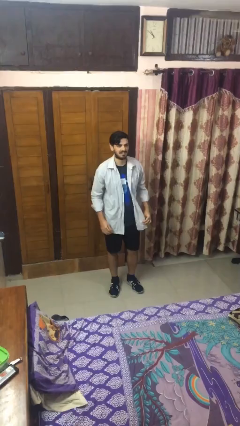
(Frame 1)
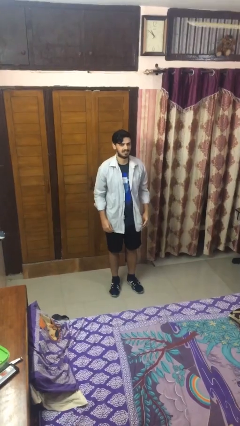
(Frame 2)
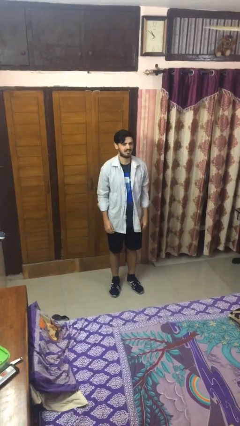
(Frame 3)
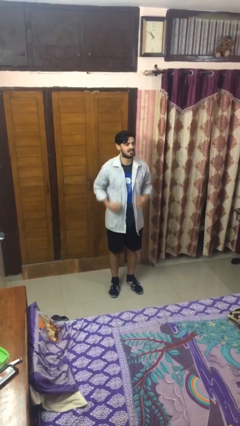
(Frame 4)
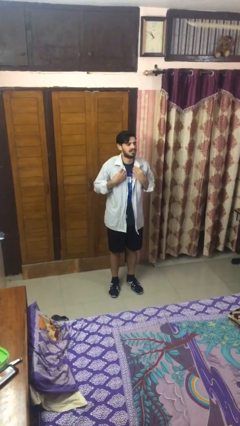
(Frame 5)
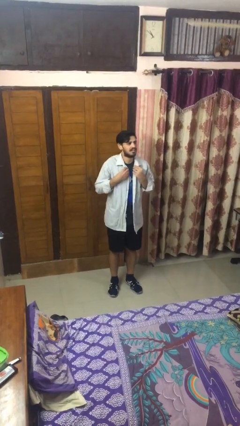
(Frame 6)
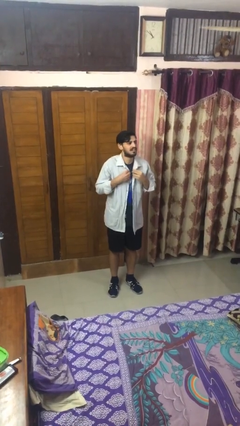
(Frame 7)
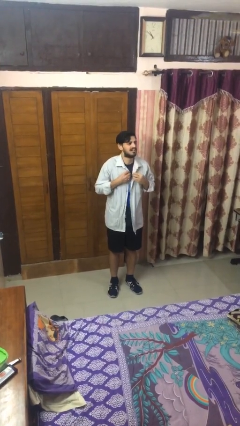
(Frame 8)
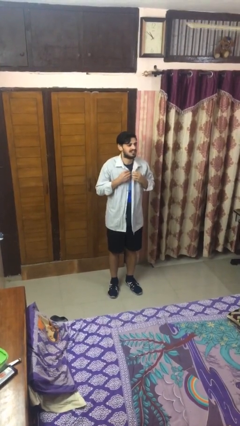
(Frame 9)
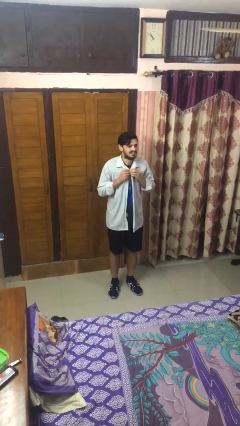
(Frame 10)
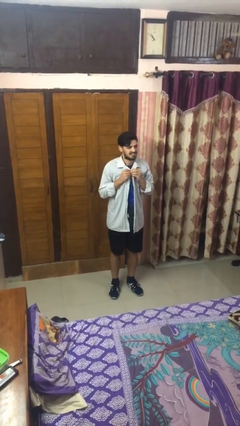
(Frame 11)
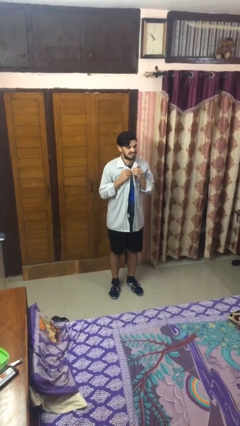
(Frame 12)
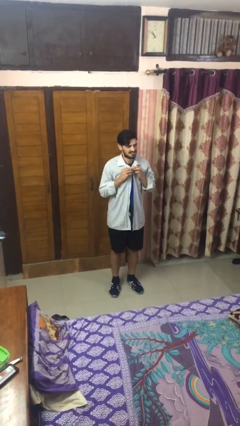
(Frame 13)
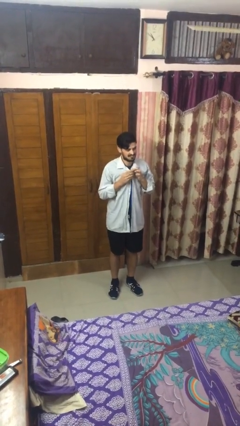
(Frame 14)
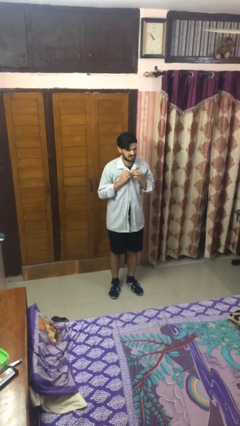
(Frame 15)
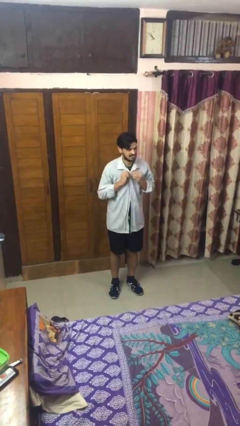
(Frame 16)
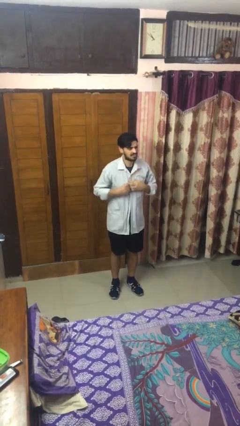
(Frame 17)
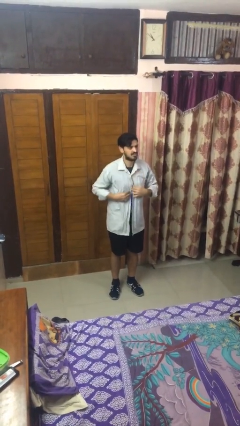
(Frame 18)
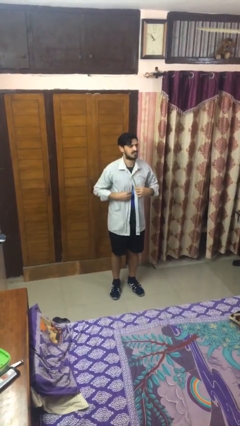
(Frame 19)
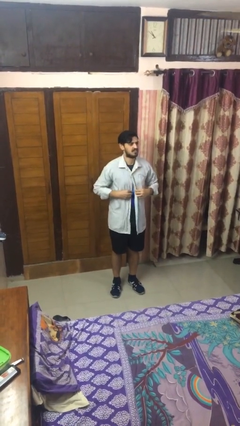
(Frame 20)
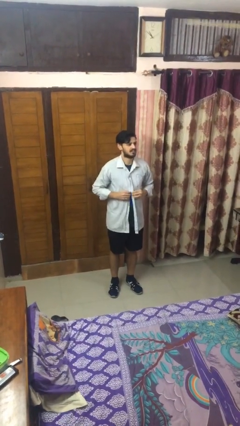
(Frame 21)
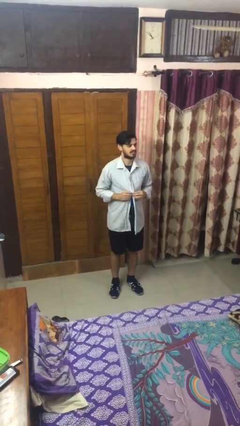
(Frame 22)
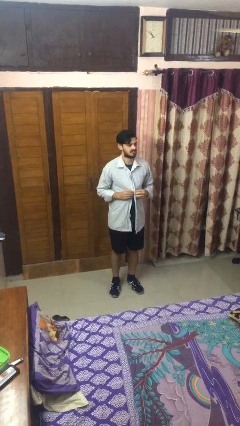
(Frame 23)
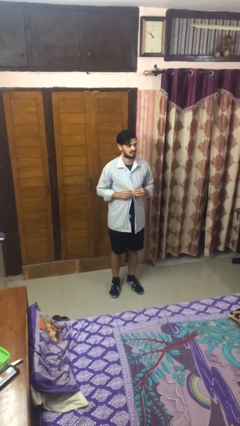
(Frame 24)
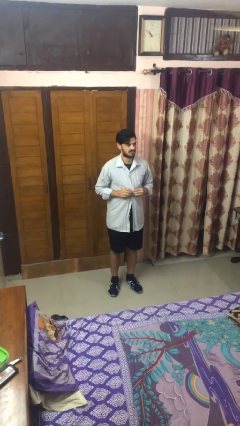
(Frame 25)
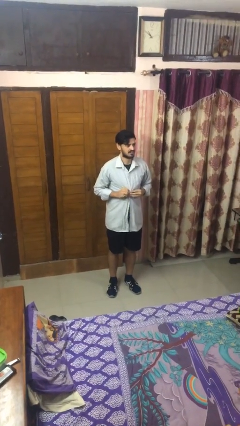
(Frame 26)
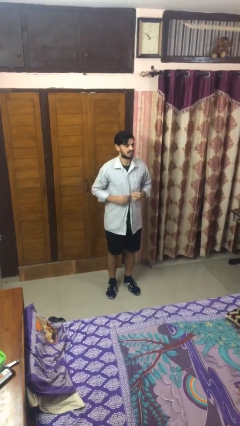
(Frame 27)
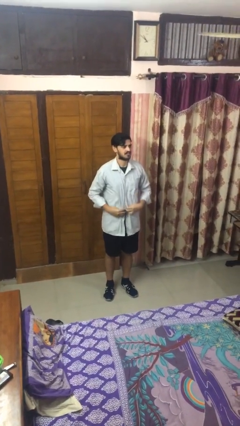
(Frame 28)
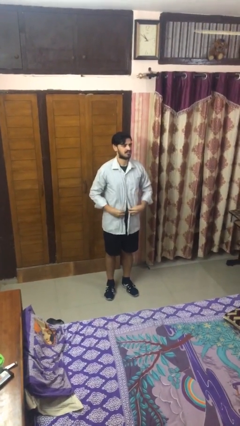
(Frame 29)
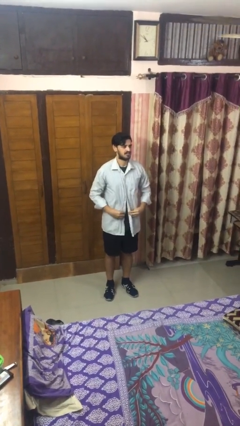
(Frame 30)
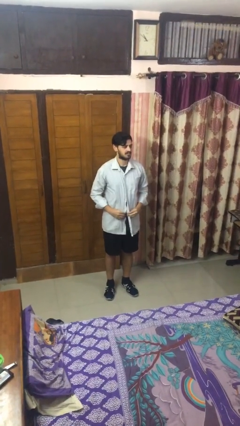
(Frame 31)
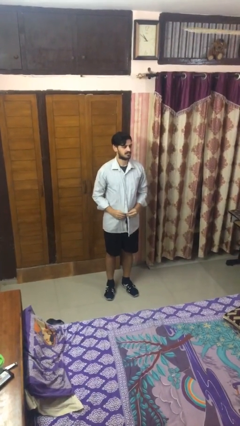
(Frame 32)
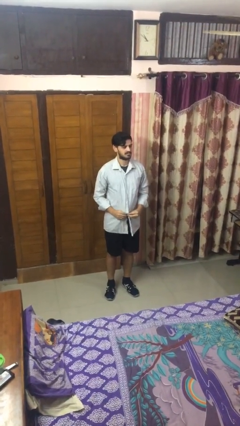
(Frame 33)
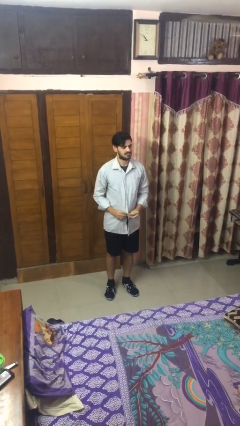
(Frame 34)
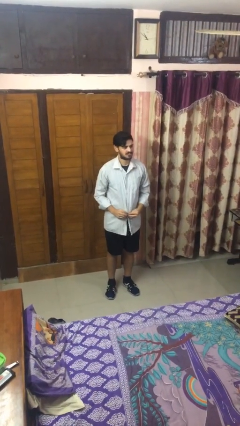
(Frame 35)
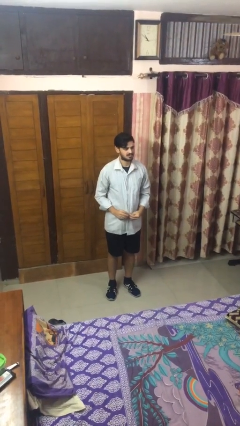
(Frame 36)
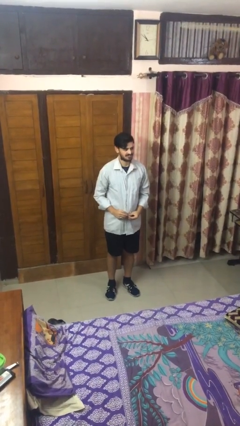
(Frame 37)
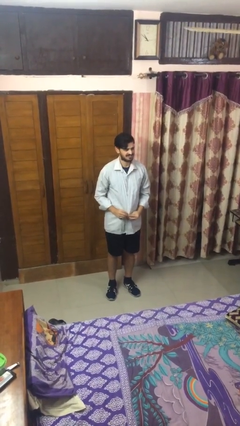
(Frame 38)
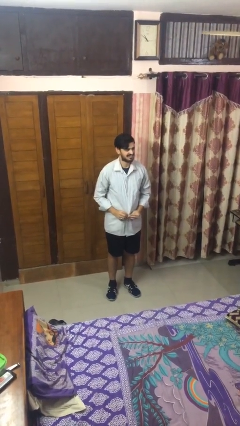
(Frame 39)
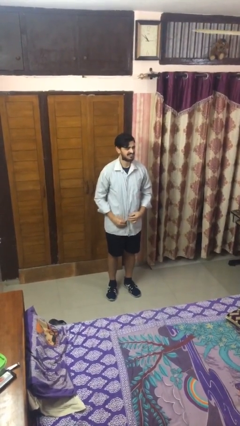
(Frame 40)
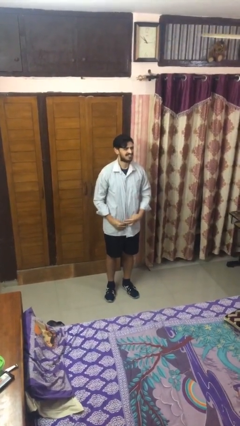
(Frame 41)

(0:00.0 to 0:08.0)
person buttons shirt

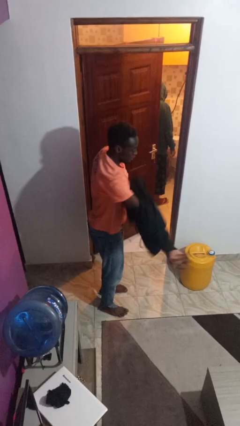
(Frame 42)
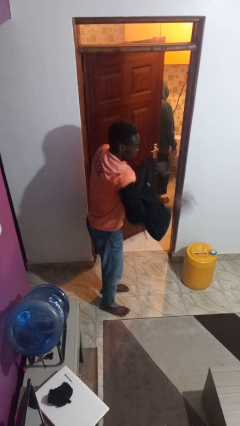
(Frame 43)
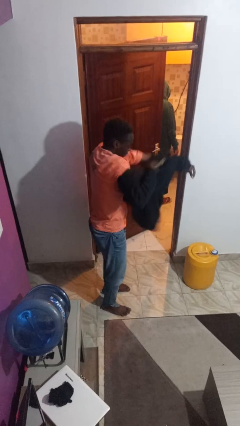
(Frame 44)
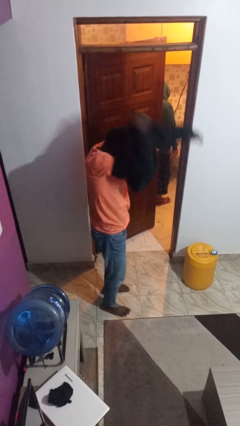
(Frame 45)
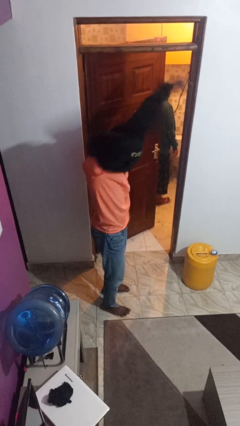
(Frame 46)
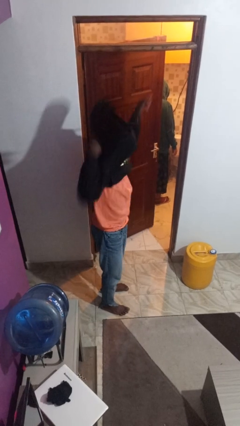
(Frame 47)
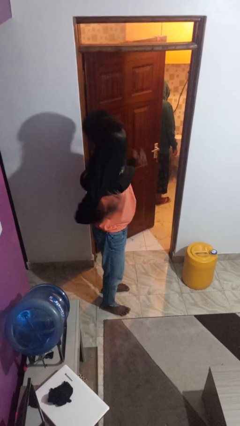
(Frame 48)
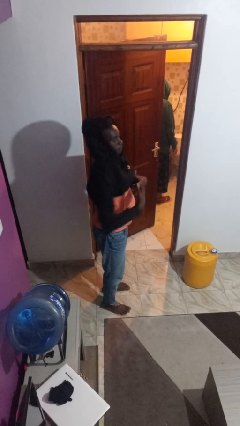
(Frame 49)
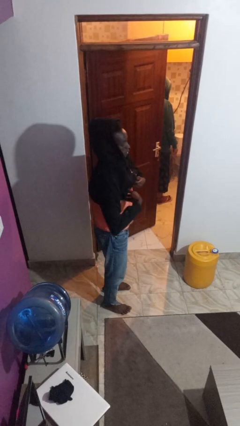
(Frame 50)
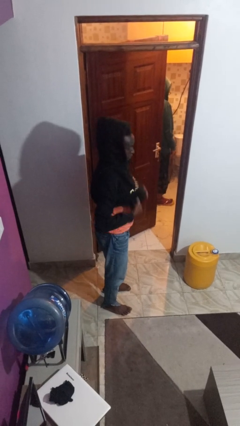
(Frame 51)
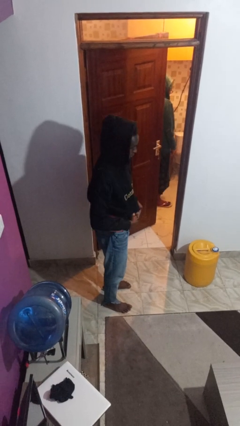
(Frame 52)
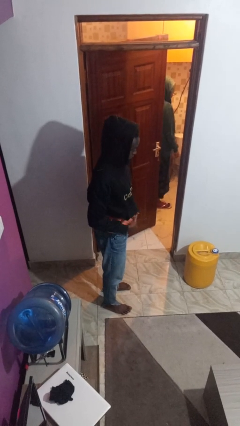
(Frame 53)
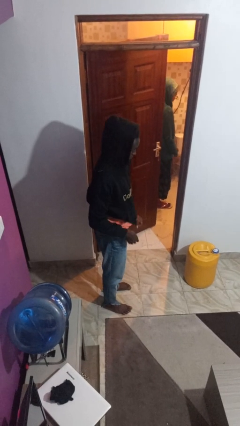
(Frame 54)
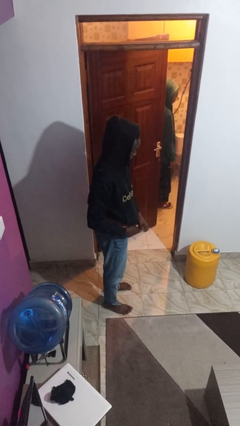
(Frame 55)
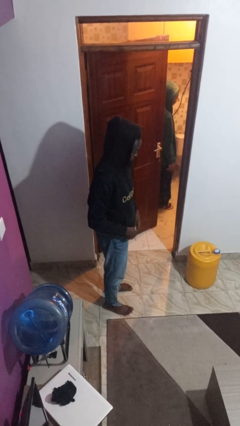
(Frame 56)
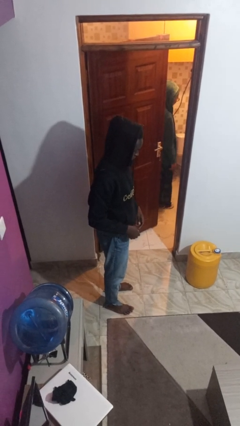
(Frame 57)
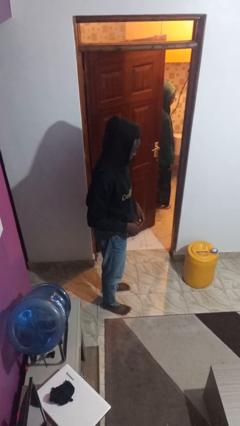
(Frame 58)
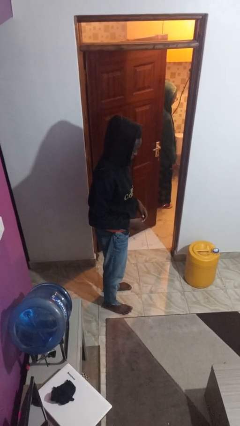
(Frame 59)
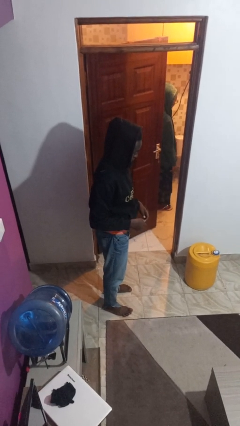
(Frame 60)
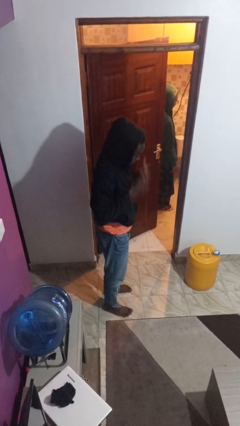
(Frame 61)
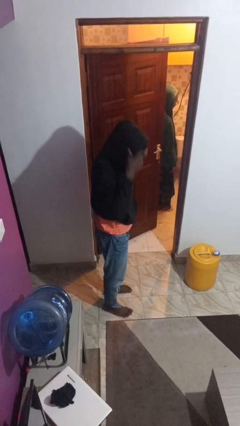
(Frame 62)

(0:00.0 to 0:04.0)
person puts on hoodie

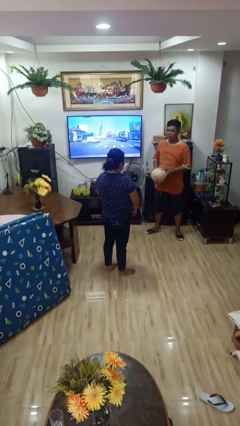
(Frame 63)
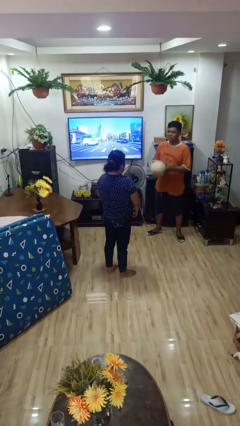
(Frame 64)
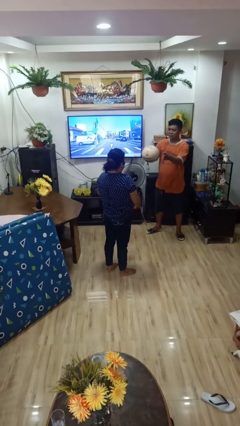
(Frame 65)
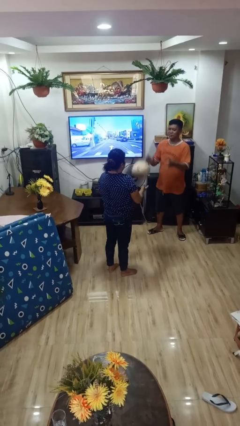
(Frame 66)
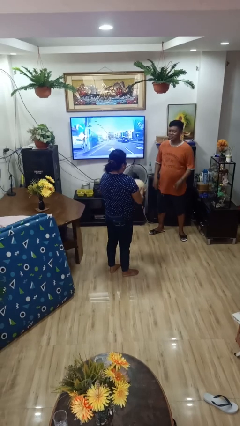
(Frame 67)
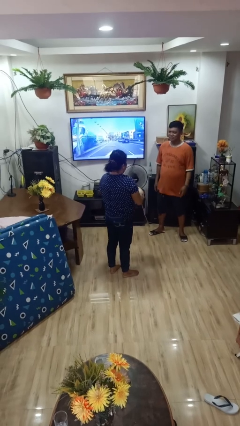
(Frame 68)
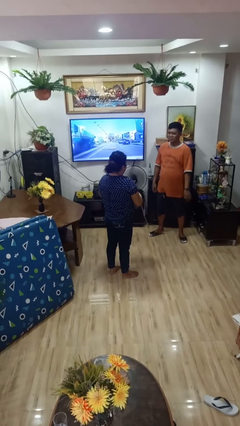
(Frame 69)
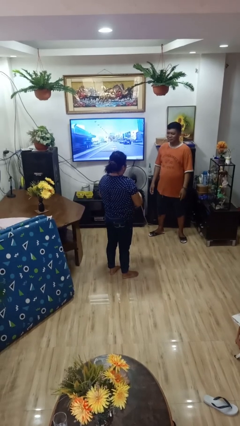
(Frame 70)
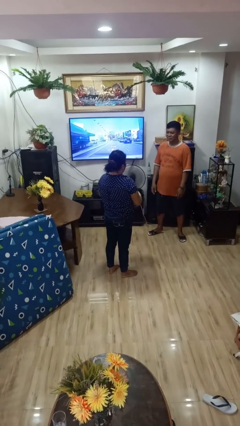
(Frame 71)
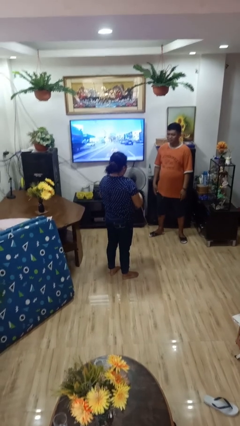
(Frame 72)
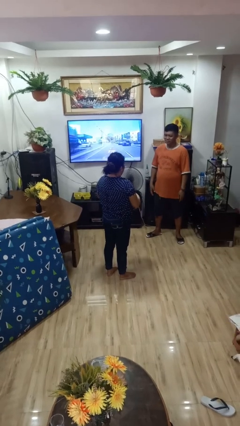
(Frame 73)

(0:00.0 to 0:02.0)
person catches object from person

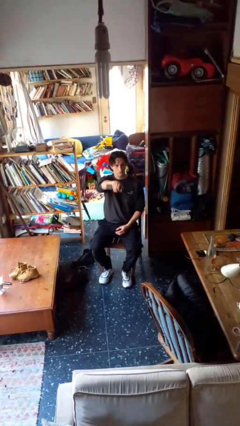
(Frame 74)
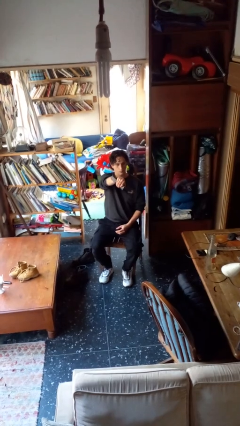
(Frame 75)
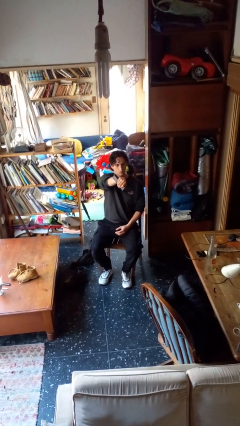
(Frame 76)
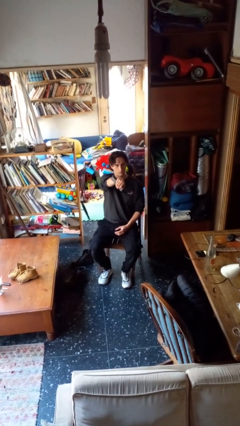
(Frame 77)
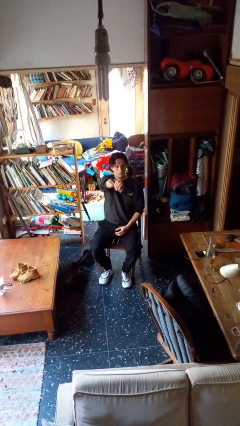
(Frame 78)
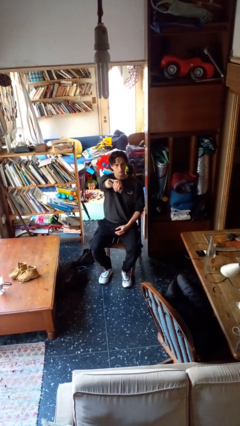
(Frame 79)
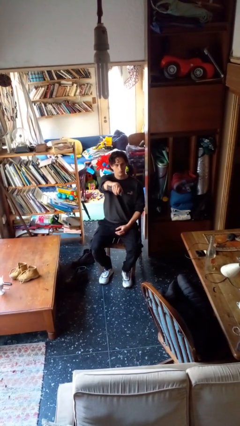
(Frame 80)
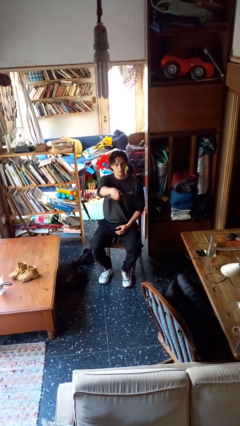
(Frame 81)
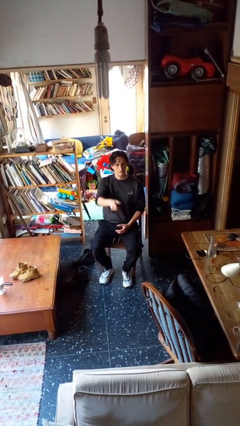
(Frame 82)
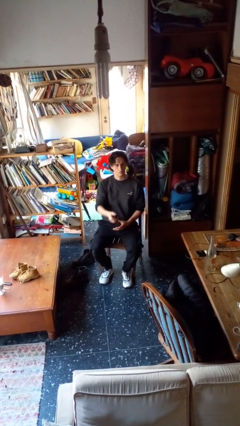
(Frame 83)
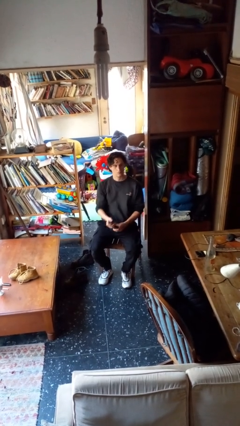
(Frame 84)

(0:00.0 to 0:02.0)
person uses television remote

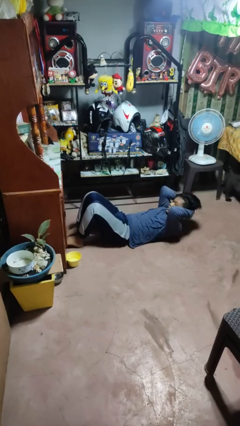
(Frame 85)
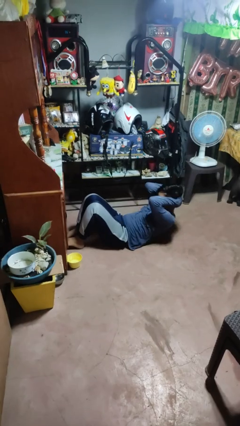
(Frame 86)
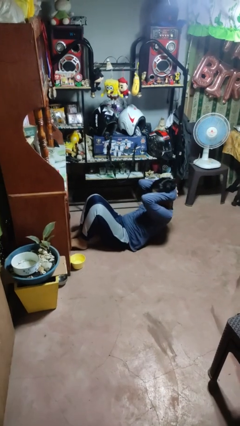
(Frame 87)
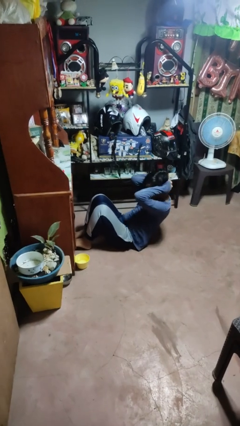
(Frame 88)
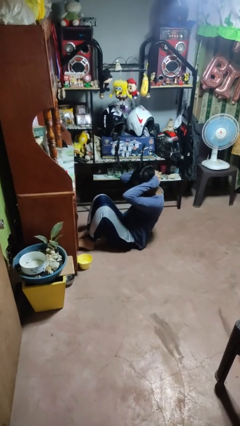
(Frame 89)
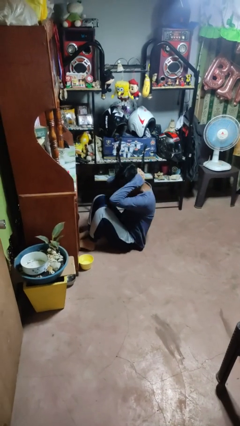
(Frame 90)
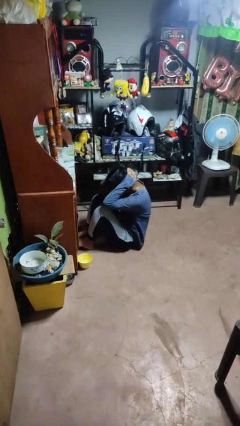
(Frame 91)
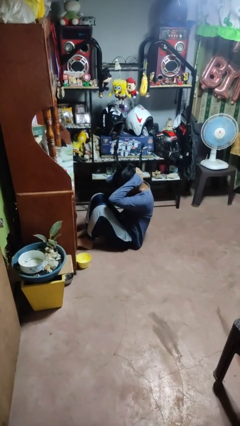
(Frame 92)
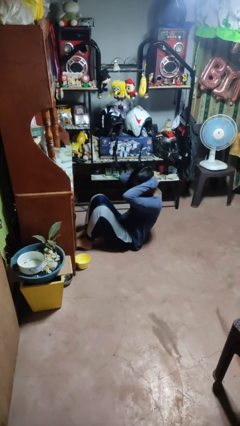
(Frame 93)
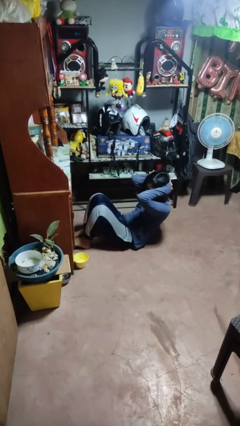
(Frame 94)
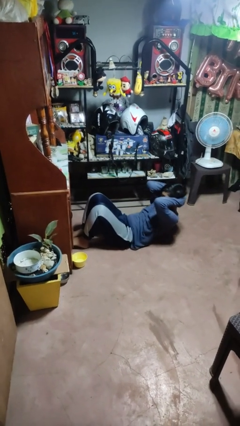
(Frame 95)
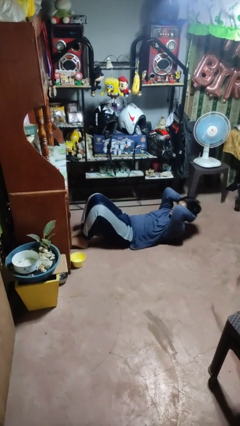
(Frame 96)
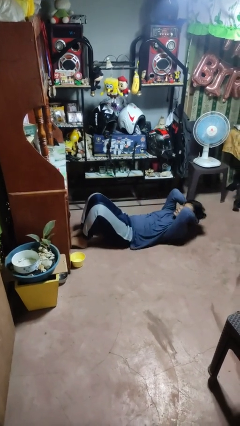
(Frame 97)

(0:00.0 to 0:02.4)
person exercises with situp
